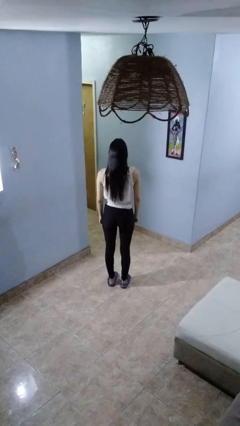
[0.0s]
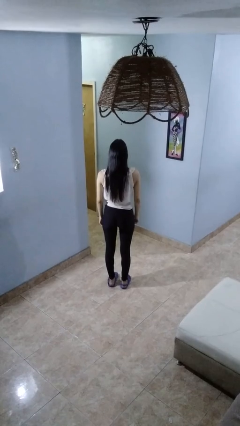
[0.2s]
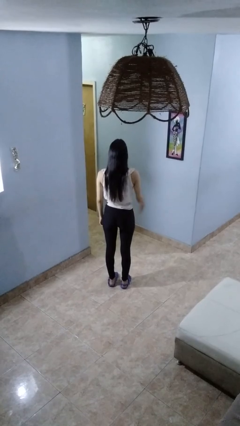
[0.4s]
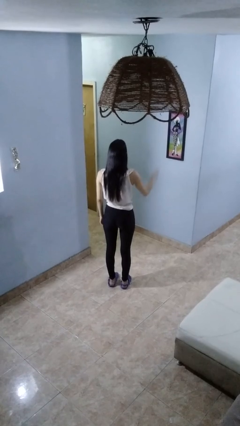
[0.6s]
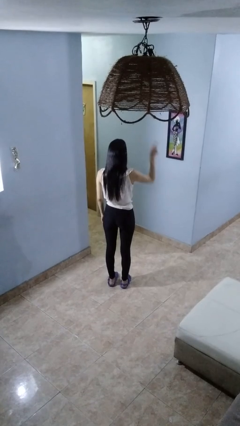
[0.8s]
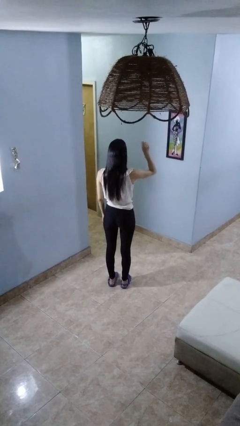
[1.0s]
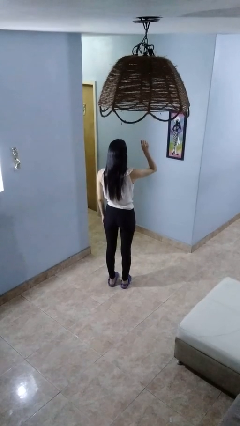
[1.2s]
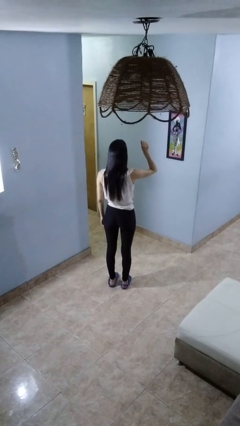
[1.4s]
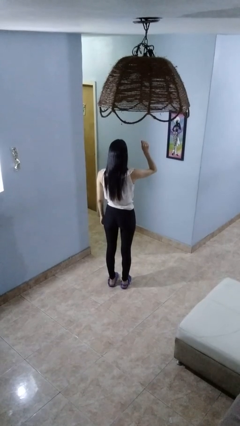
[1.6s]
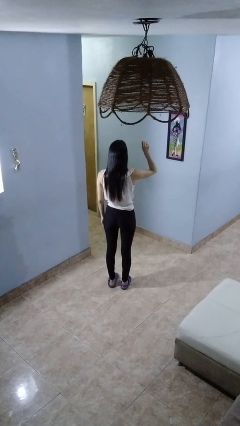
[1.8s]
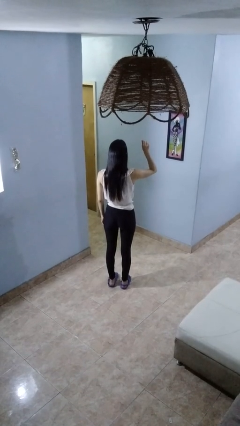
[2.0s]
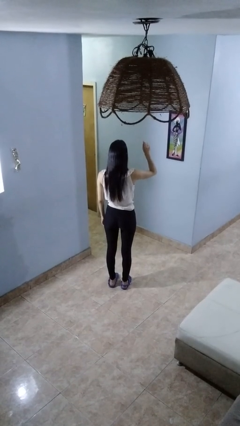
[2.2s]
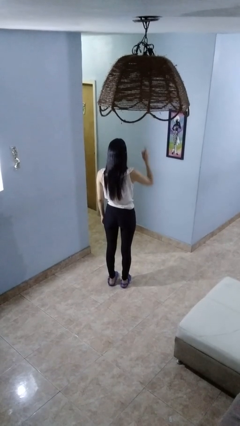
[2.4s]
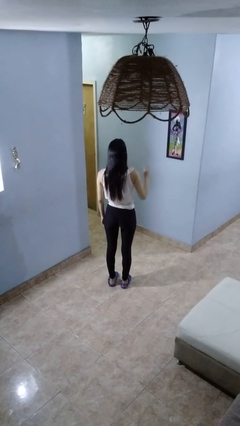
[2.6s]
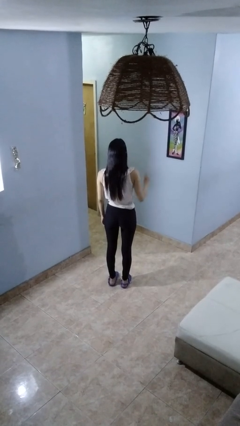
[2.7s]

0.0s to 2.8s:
person gestures number one

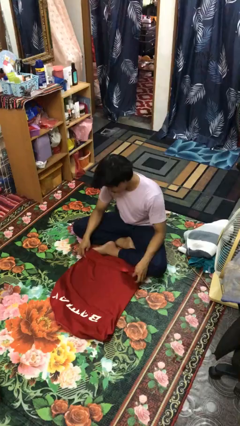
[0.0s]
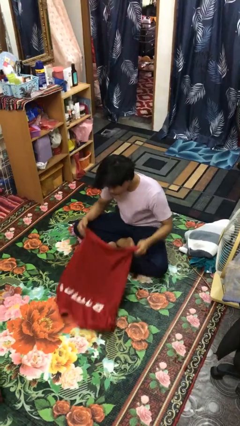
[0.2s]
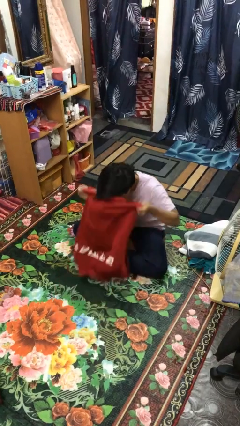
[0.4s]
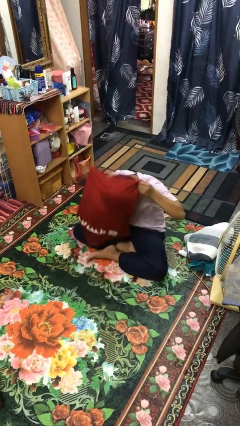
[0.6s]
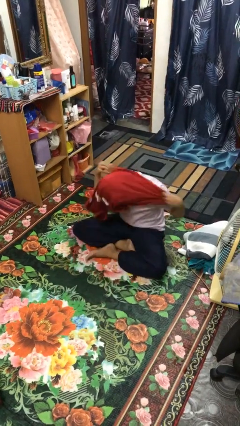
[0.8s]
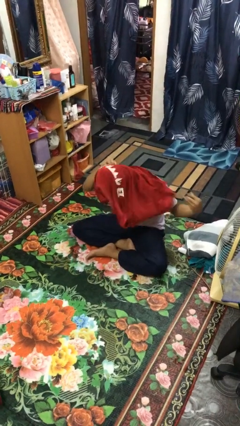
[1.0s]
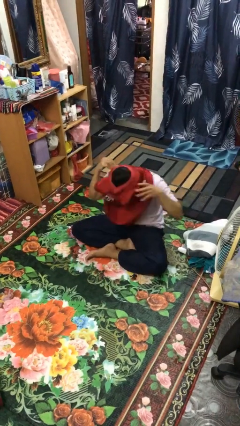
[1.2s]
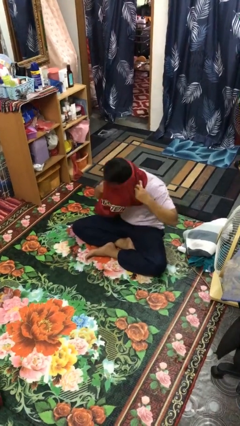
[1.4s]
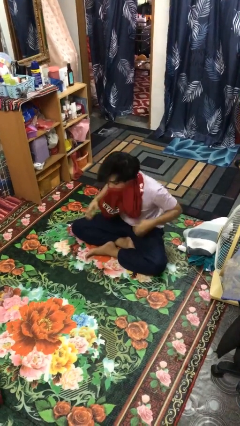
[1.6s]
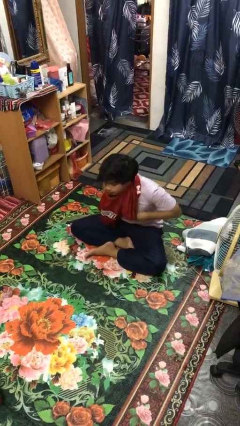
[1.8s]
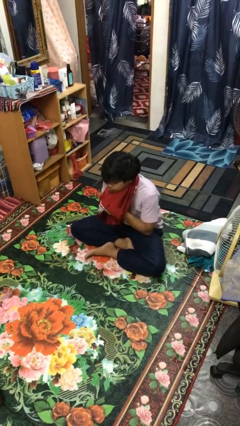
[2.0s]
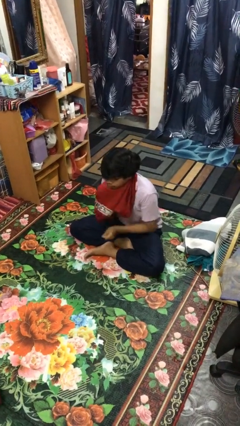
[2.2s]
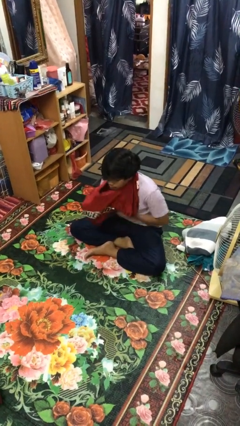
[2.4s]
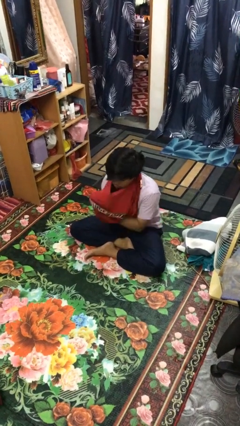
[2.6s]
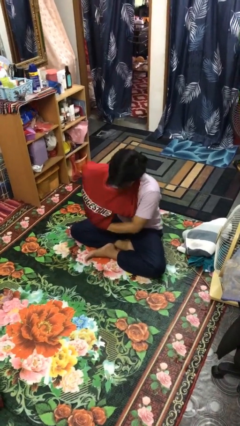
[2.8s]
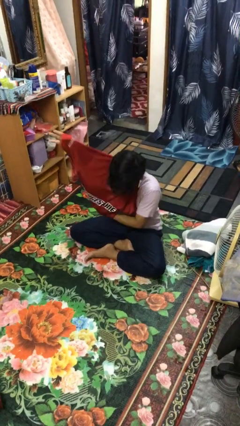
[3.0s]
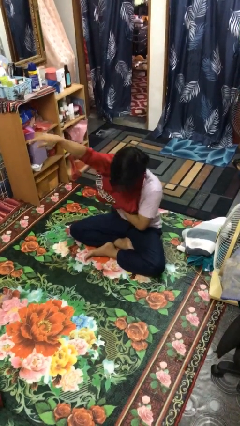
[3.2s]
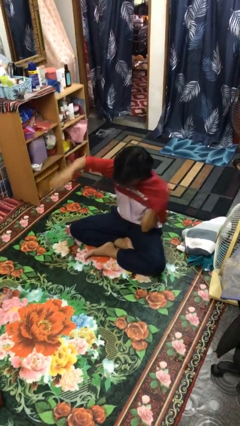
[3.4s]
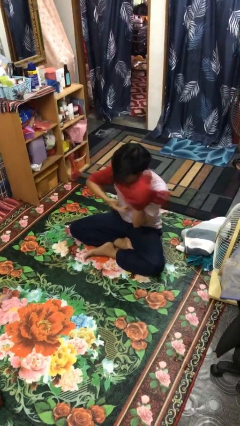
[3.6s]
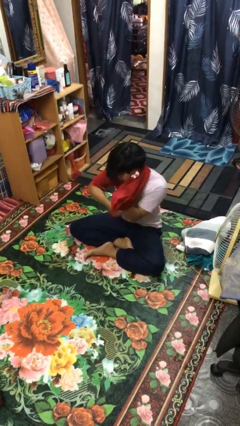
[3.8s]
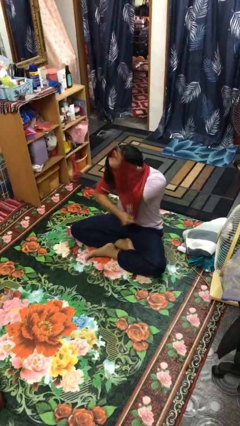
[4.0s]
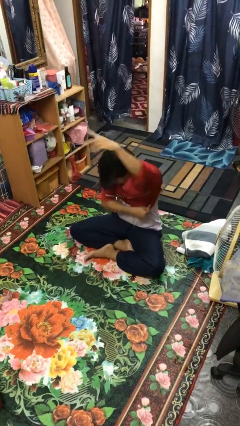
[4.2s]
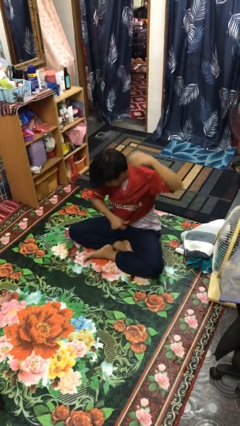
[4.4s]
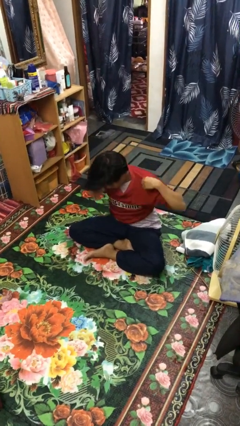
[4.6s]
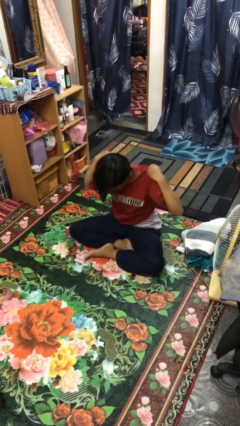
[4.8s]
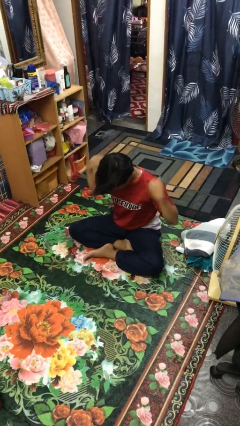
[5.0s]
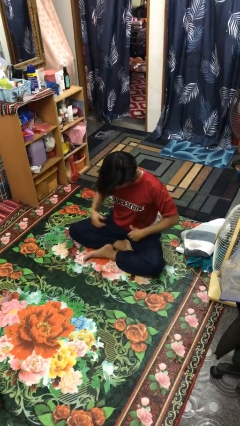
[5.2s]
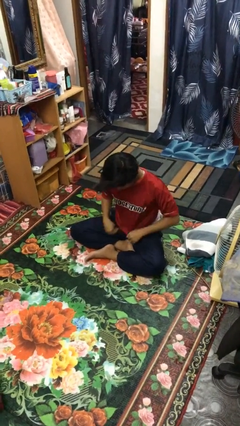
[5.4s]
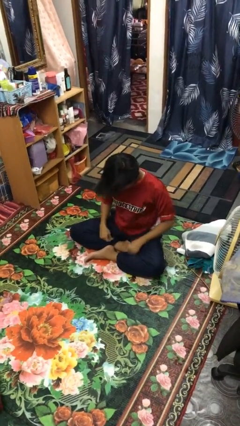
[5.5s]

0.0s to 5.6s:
person puts on shirt

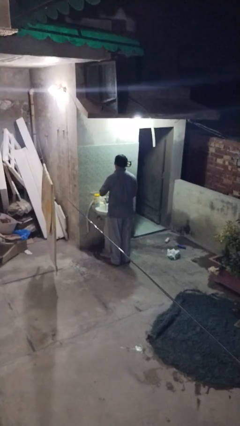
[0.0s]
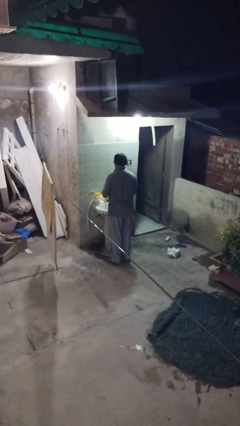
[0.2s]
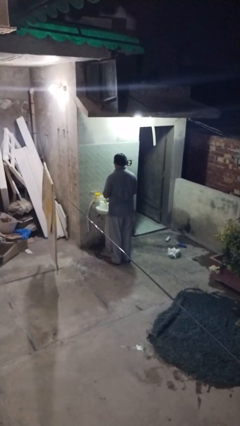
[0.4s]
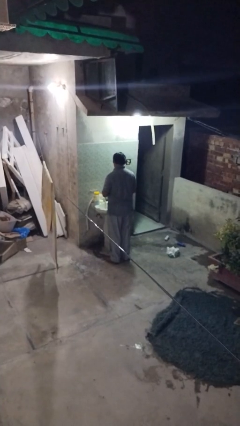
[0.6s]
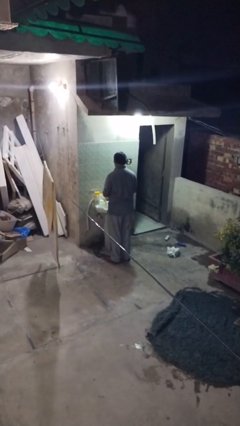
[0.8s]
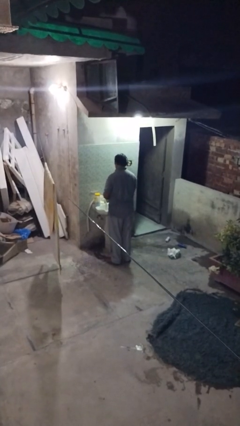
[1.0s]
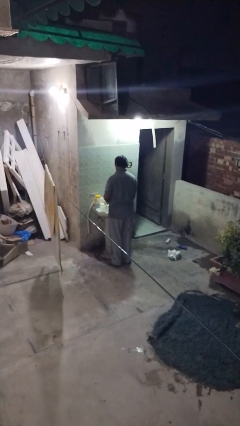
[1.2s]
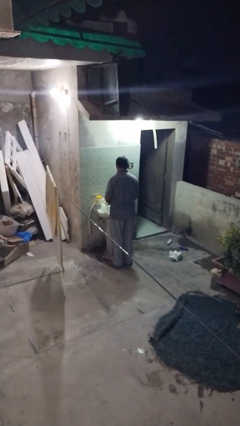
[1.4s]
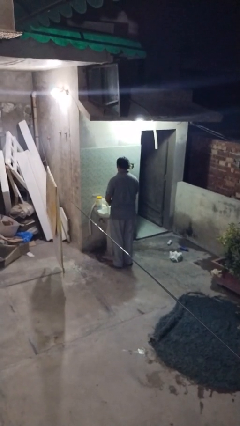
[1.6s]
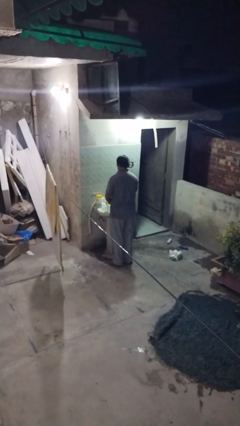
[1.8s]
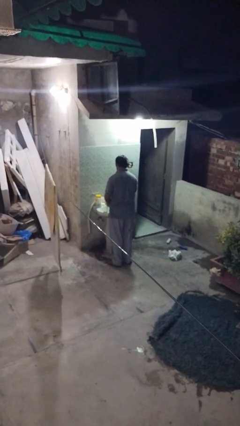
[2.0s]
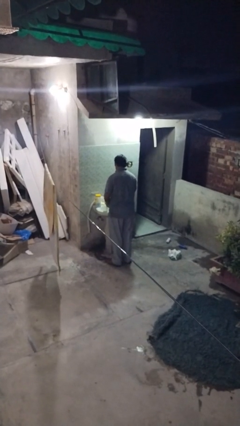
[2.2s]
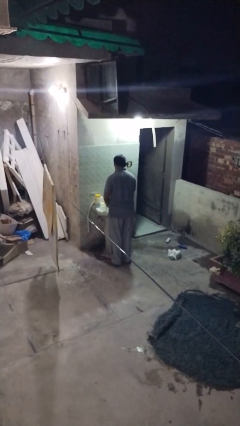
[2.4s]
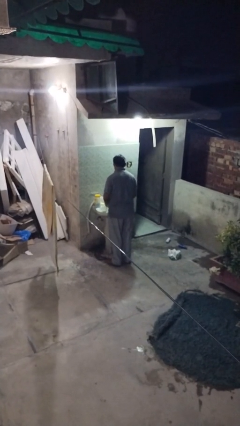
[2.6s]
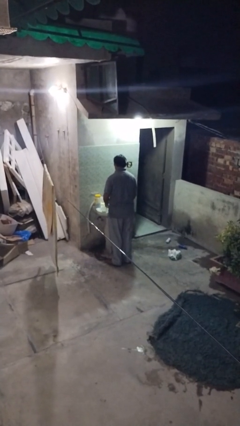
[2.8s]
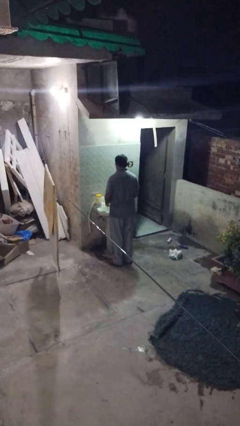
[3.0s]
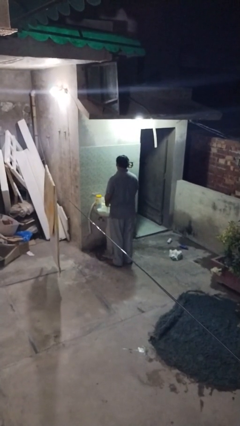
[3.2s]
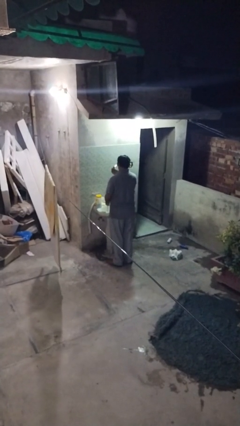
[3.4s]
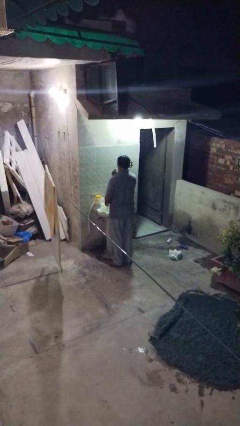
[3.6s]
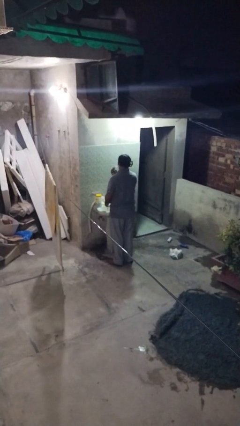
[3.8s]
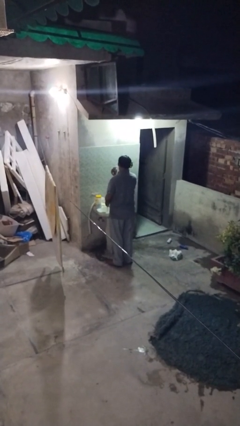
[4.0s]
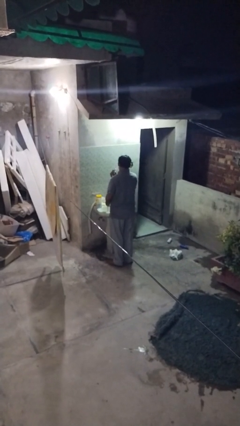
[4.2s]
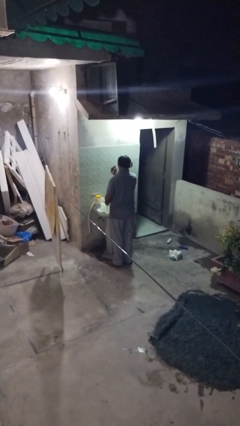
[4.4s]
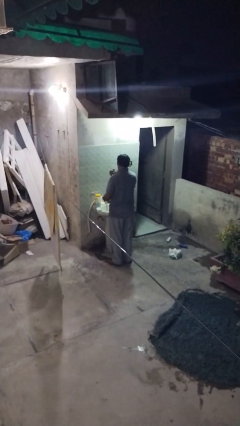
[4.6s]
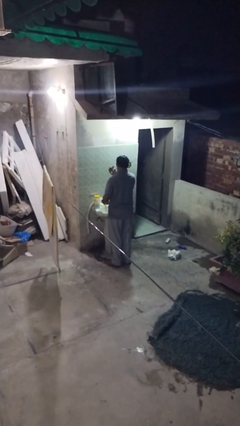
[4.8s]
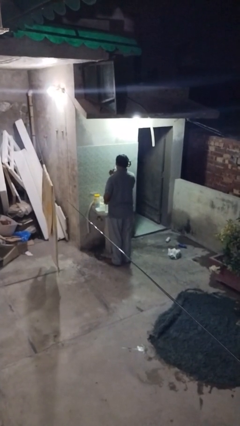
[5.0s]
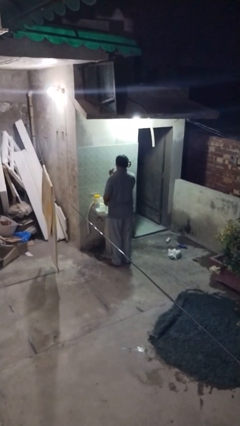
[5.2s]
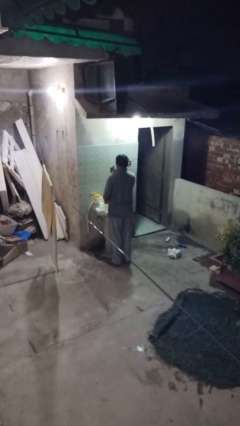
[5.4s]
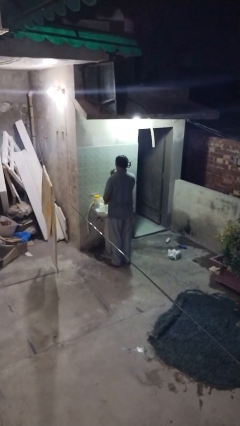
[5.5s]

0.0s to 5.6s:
person shaves face

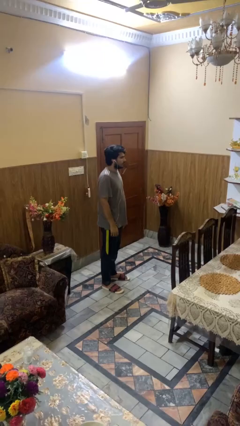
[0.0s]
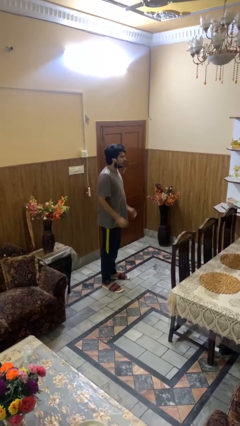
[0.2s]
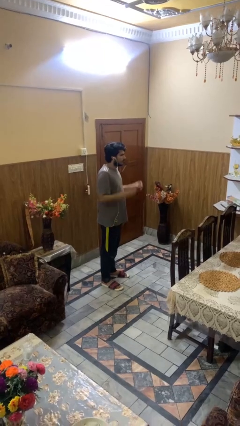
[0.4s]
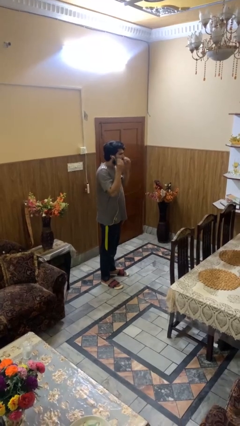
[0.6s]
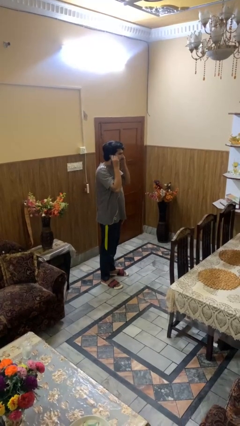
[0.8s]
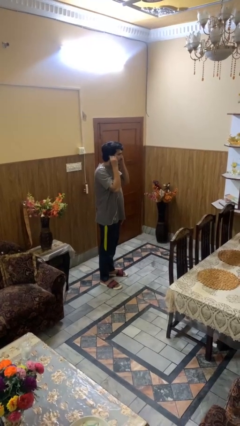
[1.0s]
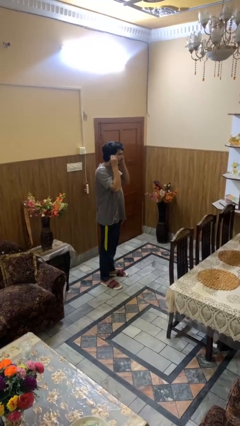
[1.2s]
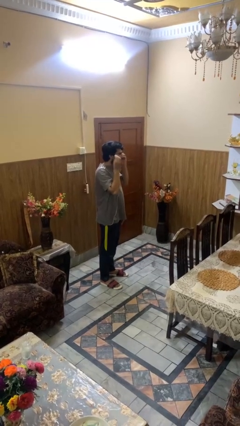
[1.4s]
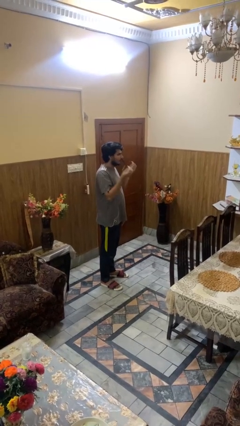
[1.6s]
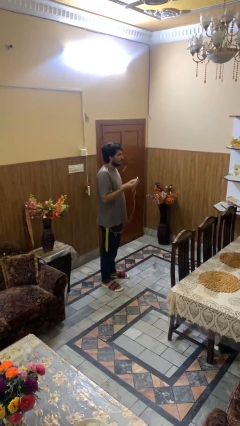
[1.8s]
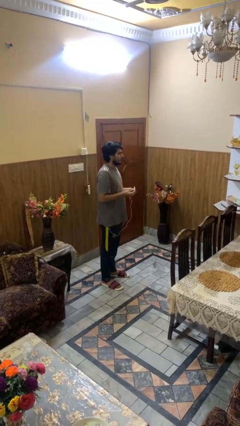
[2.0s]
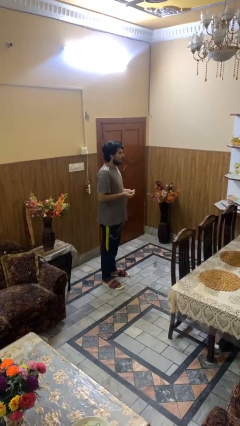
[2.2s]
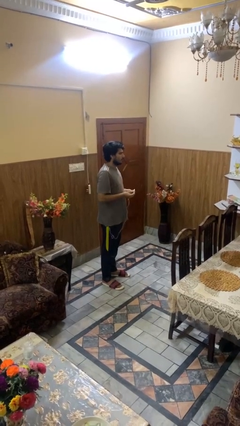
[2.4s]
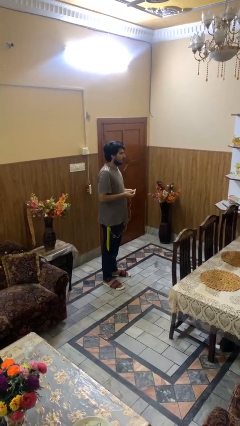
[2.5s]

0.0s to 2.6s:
person takes off headphones

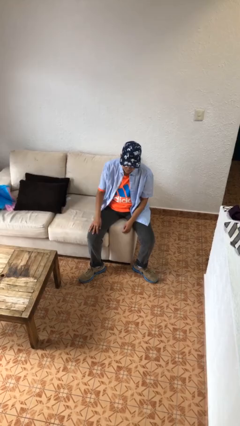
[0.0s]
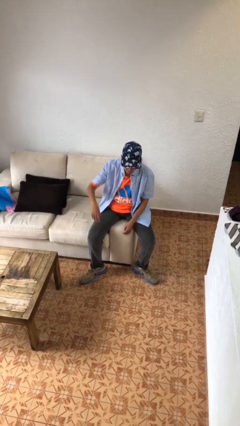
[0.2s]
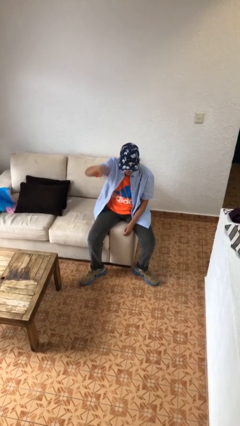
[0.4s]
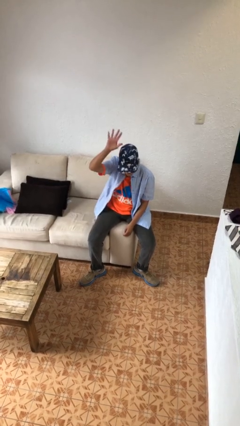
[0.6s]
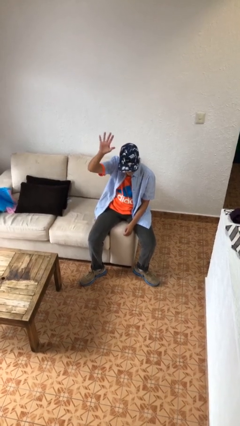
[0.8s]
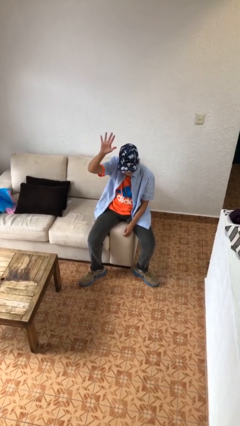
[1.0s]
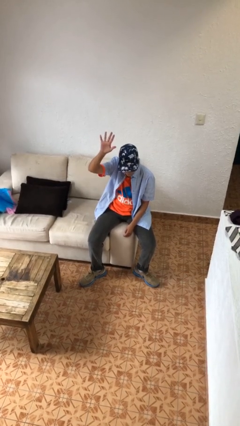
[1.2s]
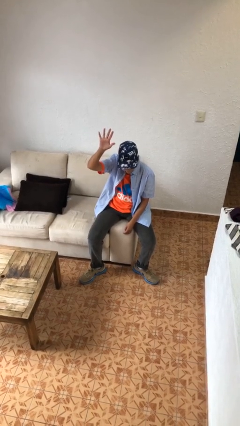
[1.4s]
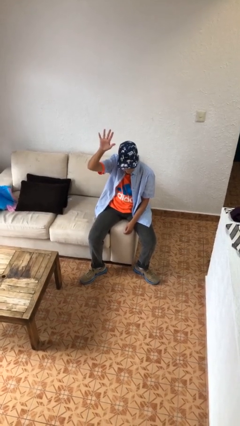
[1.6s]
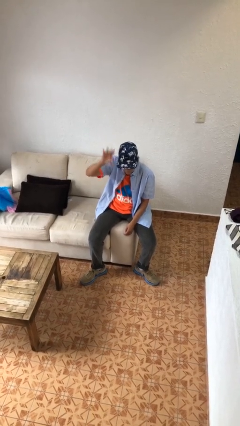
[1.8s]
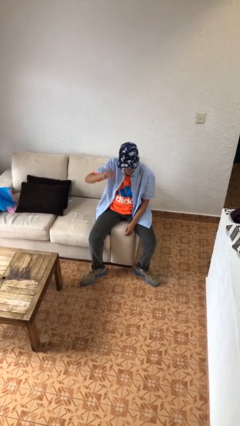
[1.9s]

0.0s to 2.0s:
person gestures number five
